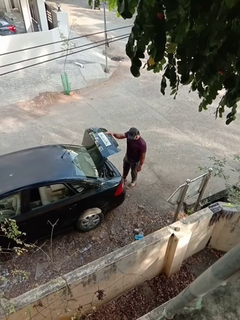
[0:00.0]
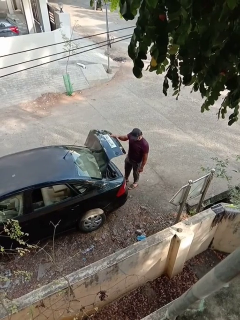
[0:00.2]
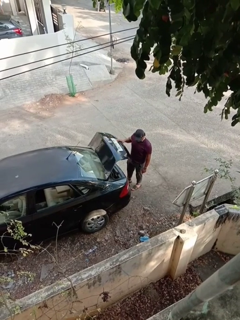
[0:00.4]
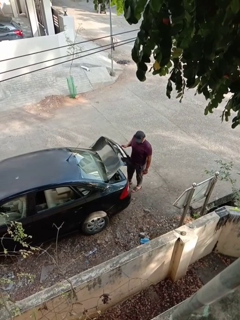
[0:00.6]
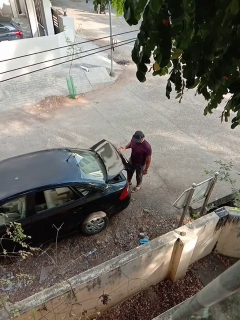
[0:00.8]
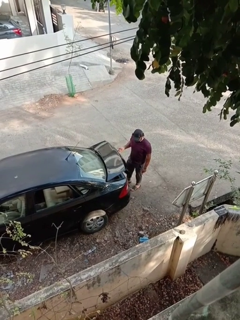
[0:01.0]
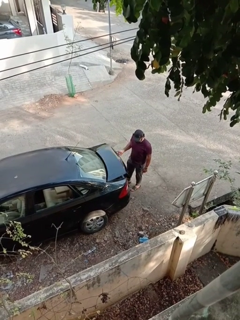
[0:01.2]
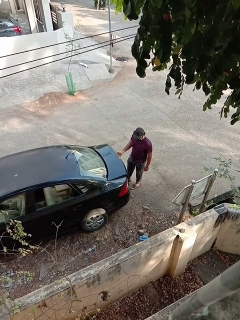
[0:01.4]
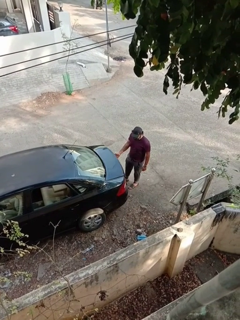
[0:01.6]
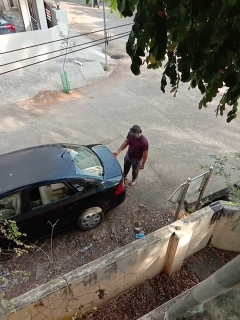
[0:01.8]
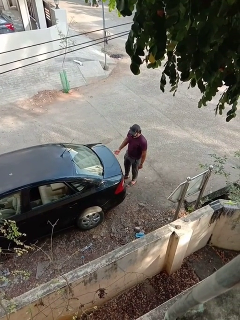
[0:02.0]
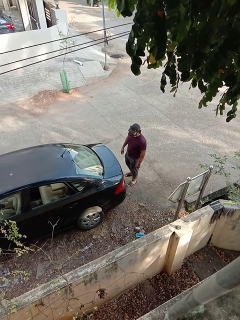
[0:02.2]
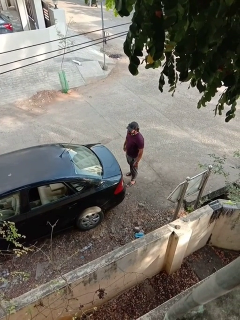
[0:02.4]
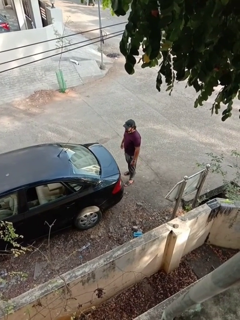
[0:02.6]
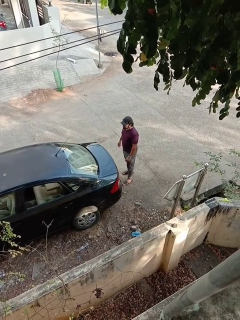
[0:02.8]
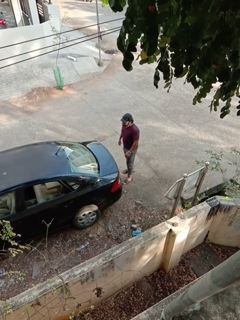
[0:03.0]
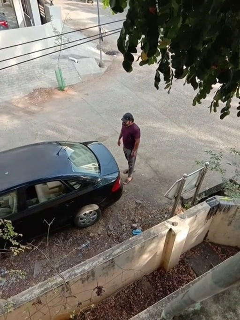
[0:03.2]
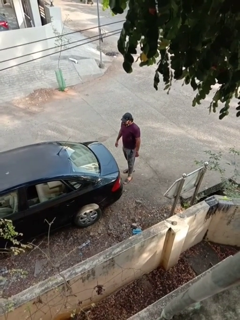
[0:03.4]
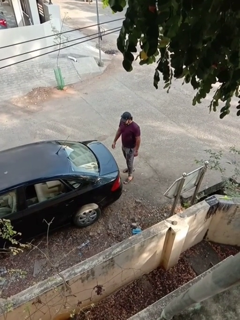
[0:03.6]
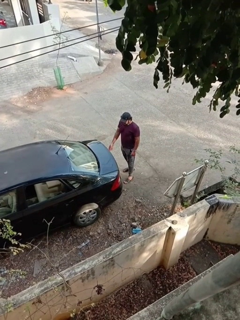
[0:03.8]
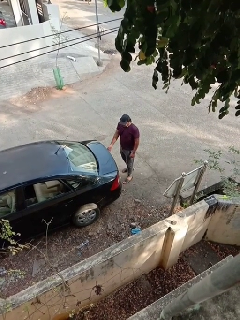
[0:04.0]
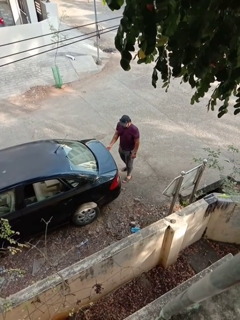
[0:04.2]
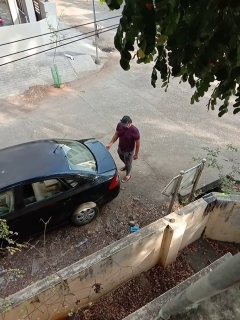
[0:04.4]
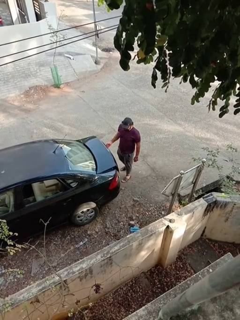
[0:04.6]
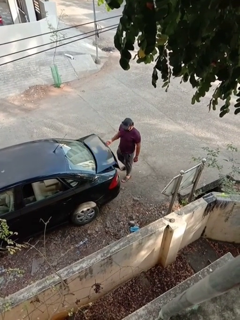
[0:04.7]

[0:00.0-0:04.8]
person closes car trunk

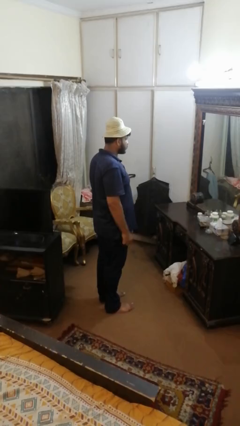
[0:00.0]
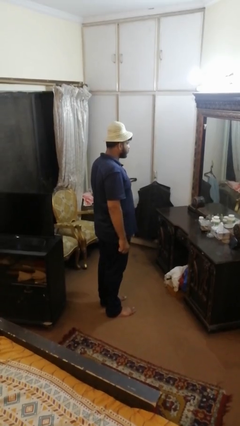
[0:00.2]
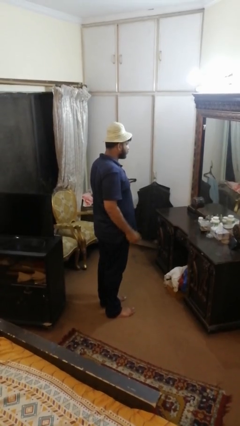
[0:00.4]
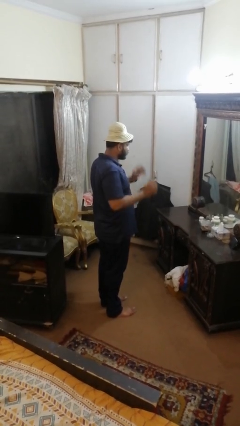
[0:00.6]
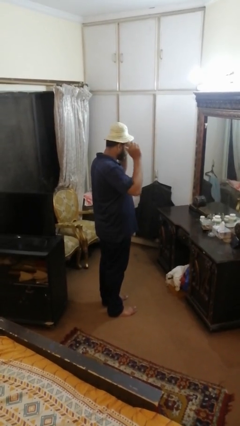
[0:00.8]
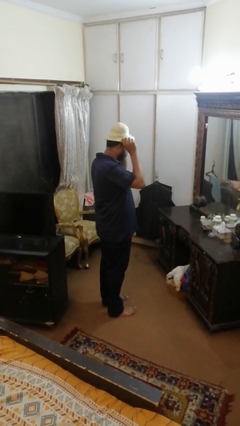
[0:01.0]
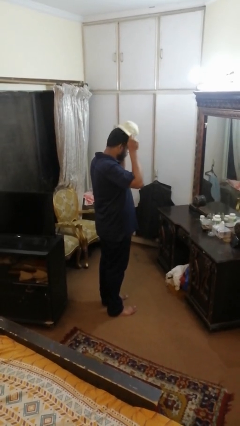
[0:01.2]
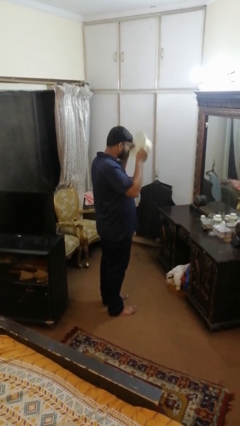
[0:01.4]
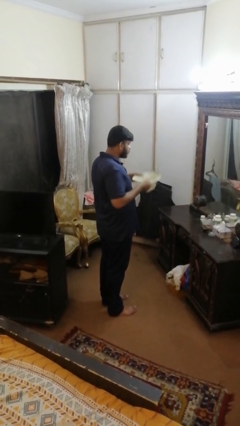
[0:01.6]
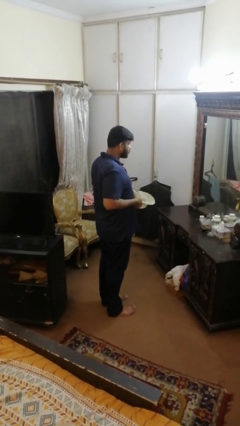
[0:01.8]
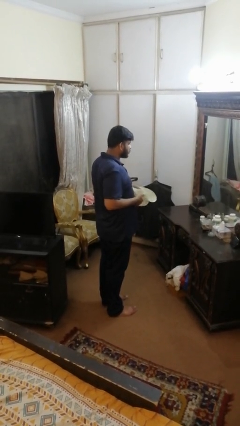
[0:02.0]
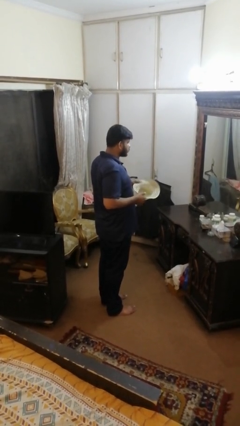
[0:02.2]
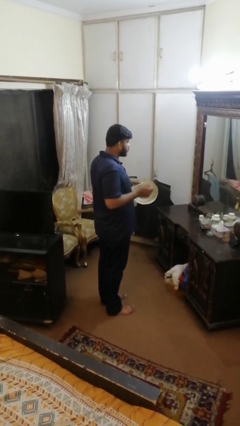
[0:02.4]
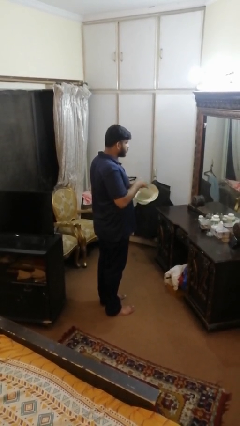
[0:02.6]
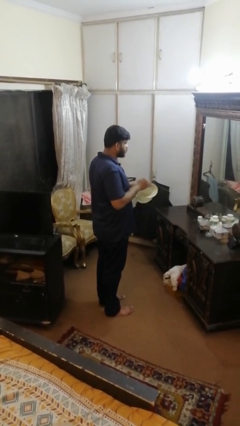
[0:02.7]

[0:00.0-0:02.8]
person takes off hat

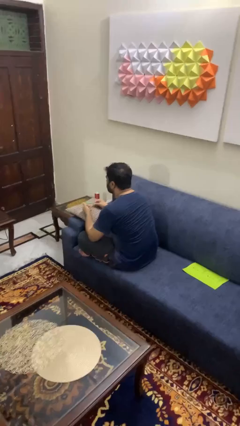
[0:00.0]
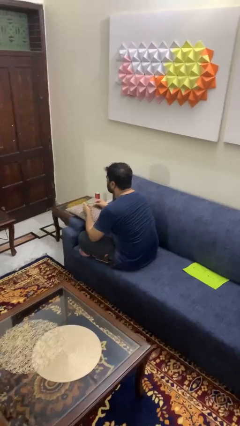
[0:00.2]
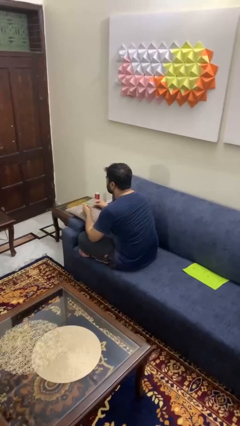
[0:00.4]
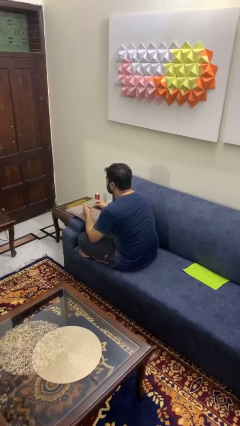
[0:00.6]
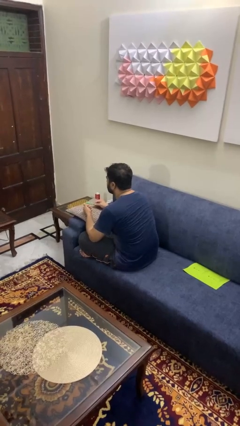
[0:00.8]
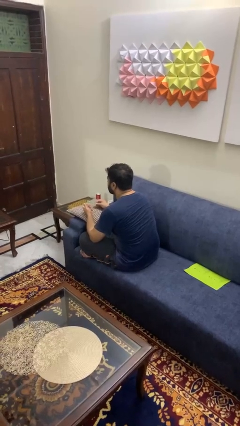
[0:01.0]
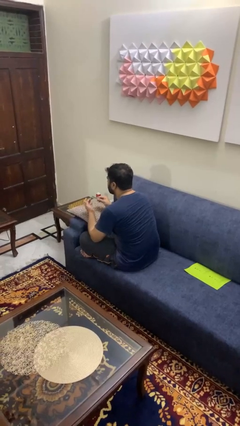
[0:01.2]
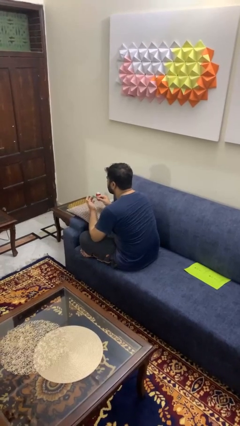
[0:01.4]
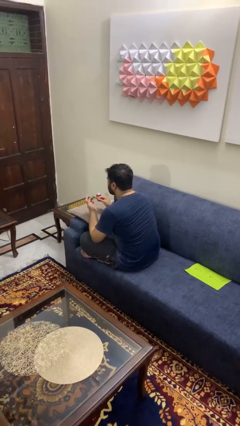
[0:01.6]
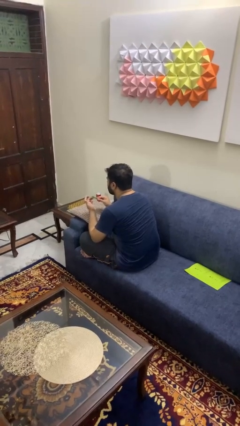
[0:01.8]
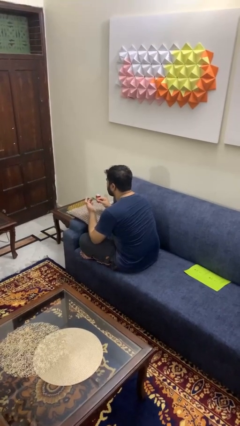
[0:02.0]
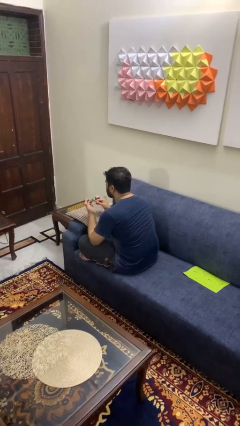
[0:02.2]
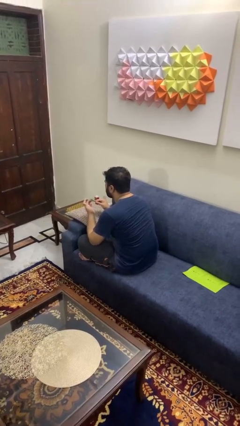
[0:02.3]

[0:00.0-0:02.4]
person files fingernails

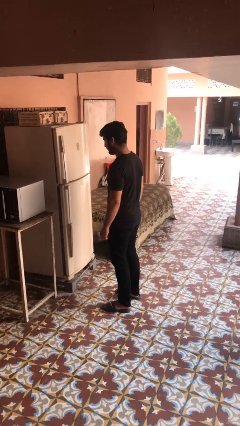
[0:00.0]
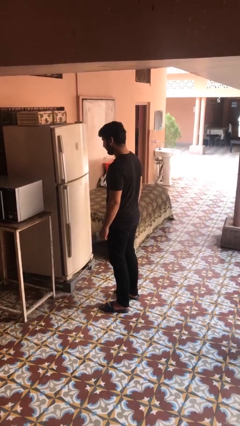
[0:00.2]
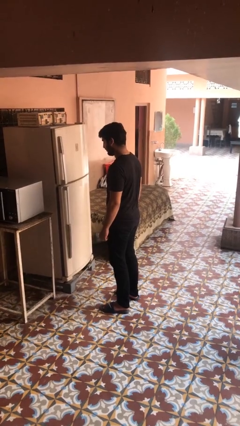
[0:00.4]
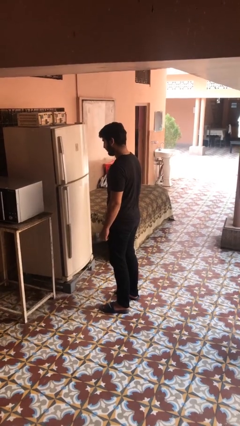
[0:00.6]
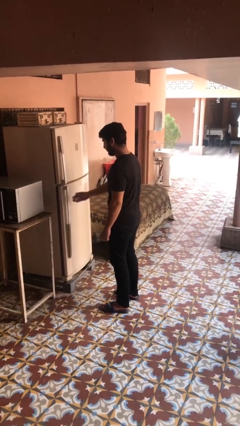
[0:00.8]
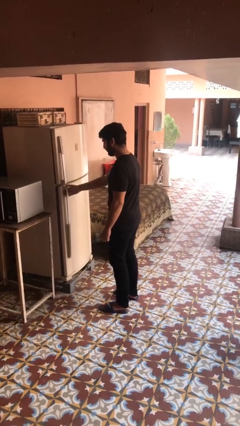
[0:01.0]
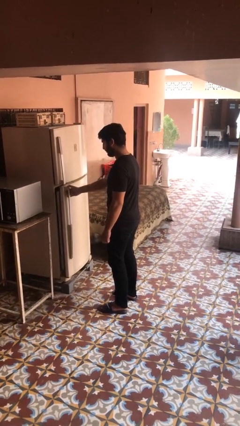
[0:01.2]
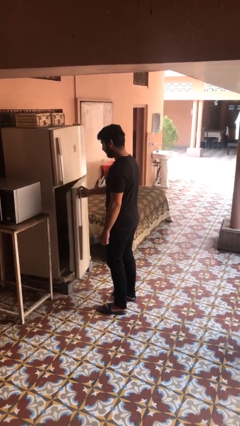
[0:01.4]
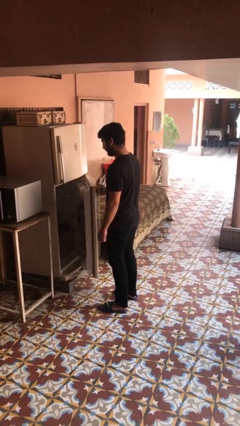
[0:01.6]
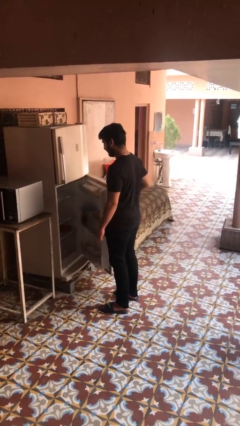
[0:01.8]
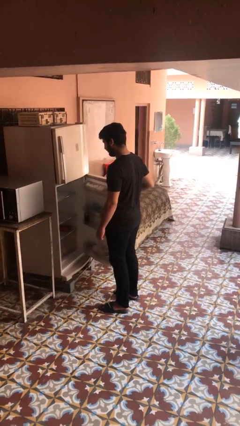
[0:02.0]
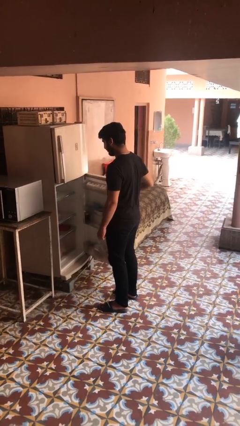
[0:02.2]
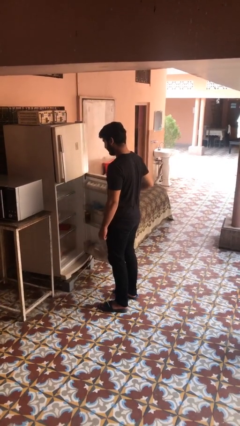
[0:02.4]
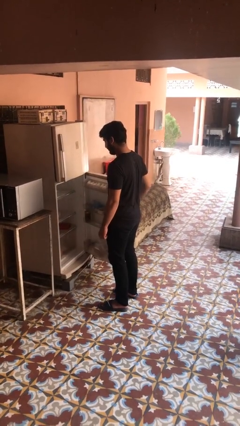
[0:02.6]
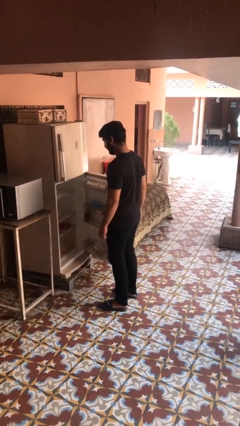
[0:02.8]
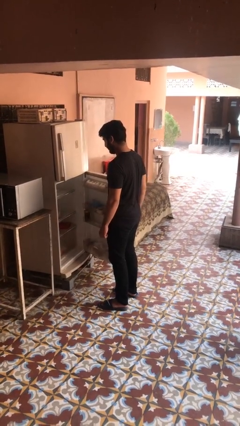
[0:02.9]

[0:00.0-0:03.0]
person opens refrigerator

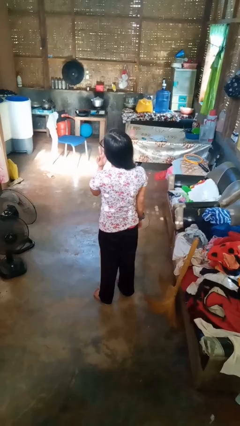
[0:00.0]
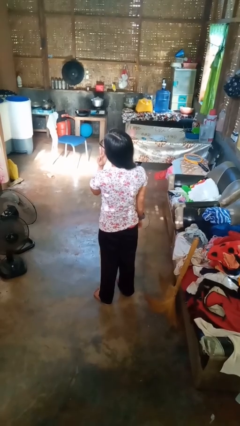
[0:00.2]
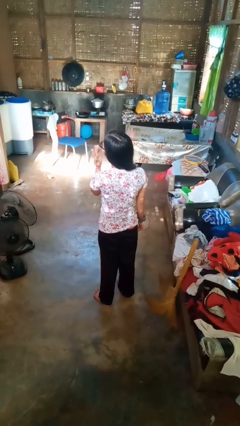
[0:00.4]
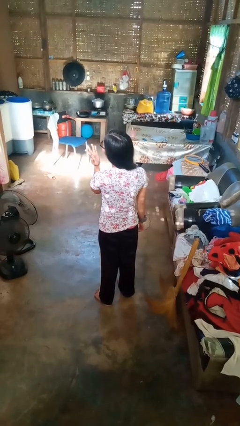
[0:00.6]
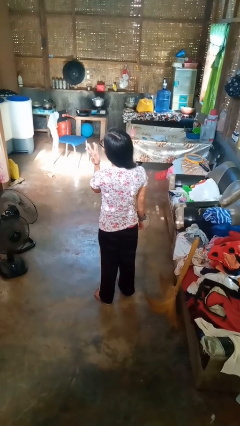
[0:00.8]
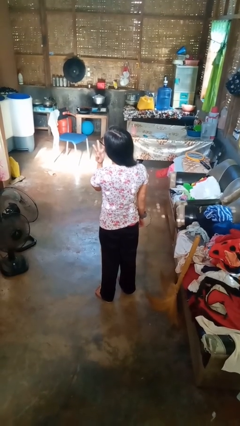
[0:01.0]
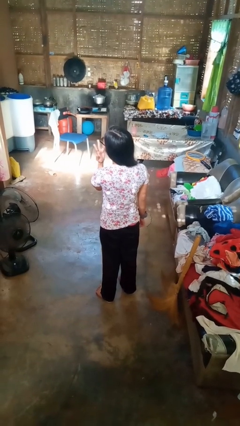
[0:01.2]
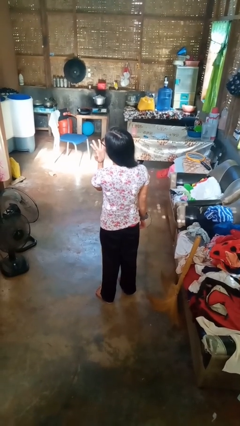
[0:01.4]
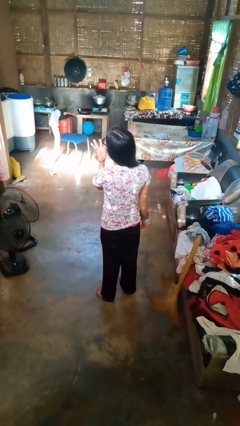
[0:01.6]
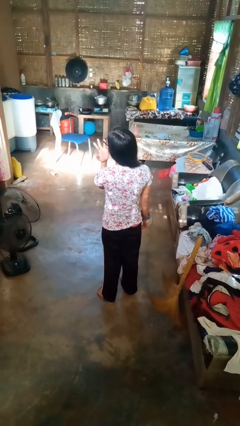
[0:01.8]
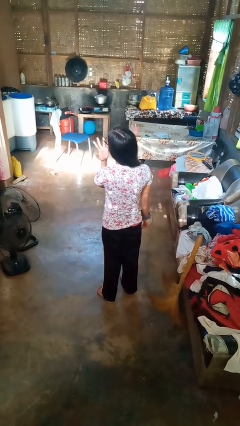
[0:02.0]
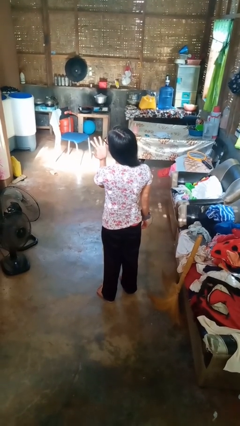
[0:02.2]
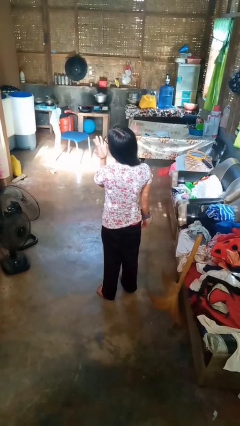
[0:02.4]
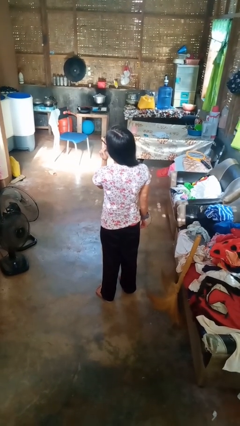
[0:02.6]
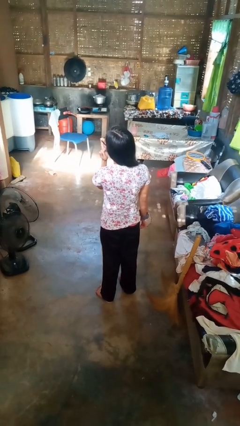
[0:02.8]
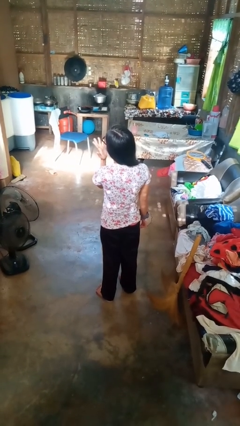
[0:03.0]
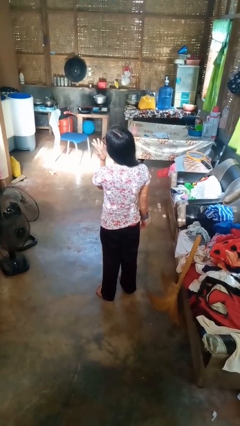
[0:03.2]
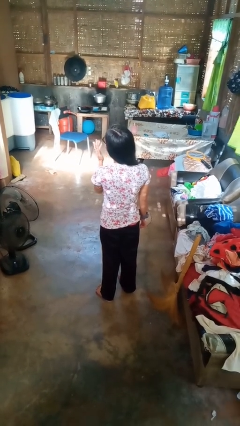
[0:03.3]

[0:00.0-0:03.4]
person licks fingers

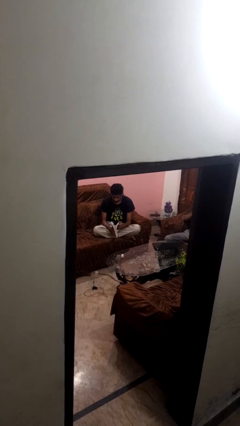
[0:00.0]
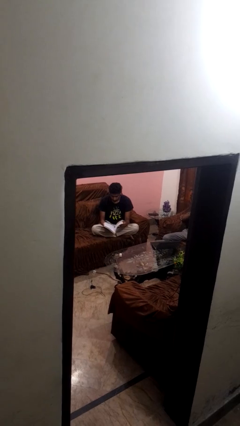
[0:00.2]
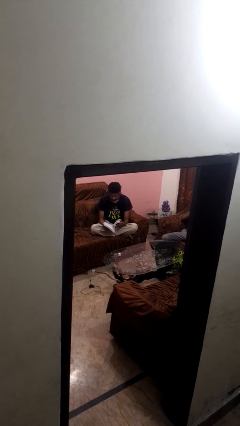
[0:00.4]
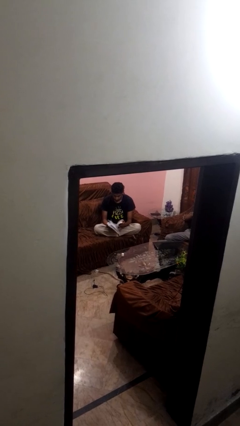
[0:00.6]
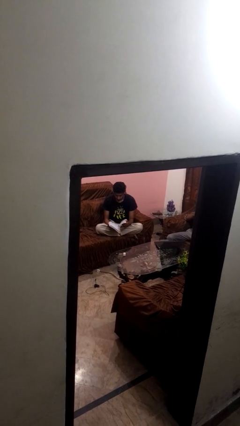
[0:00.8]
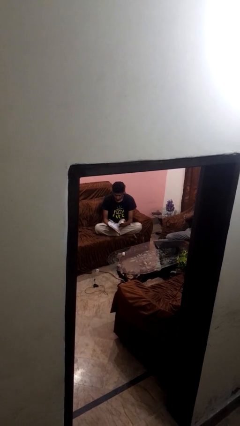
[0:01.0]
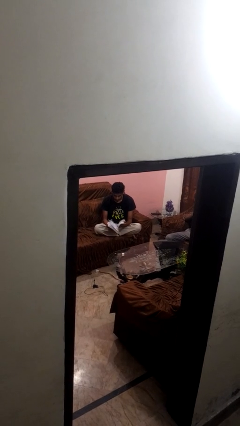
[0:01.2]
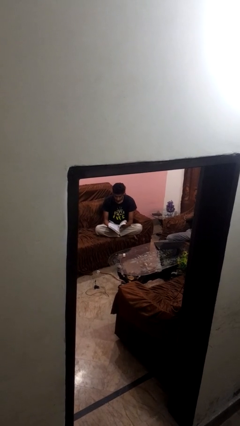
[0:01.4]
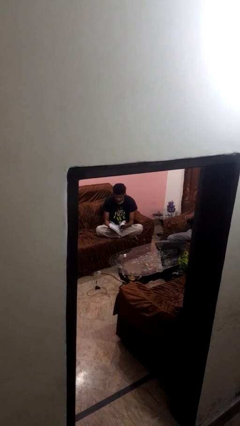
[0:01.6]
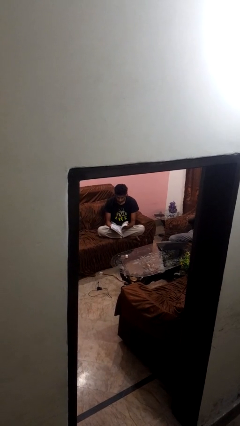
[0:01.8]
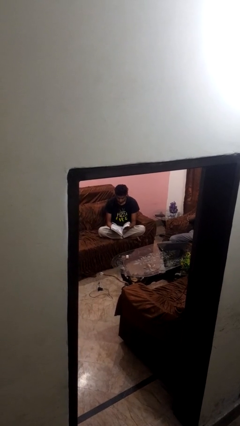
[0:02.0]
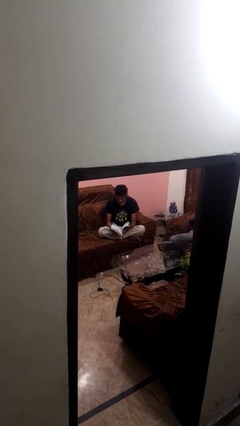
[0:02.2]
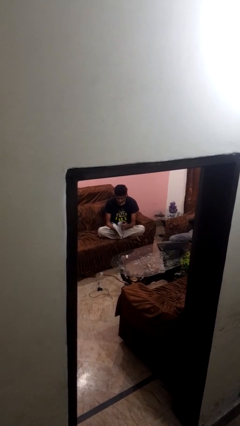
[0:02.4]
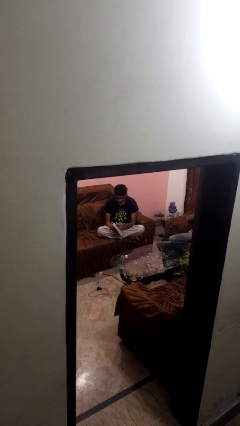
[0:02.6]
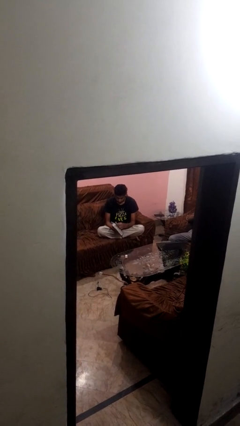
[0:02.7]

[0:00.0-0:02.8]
person reads book
